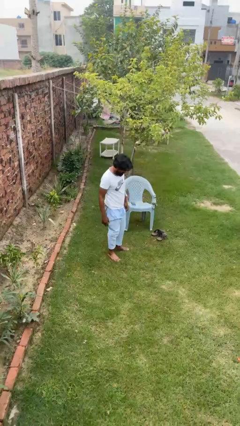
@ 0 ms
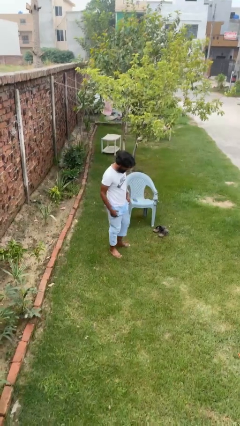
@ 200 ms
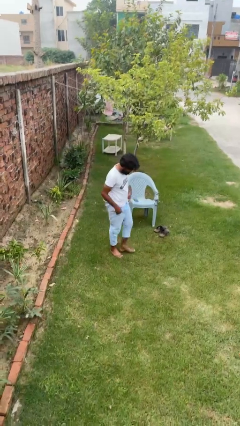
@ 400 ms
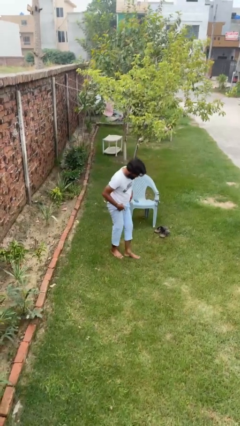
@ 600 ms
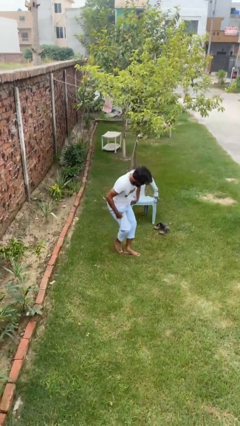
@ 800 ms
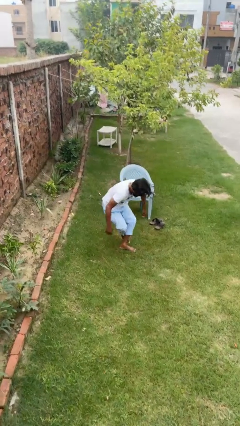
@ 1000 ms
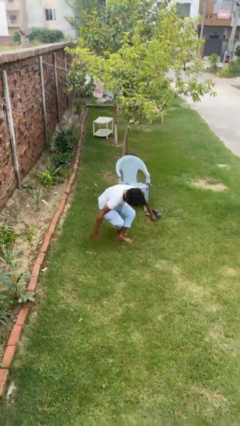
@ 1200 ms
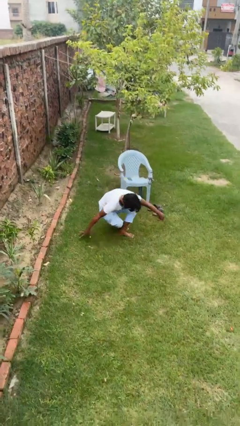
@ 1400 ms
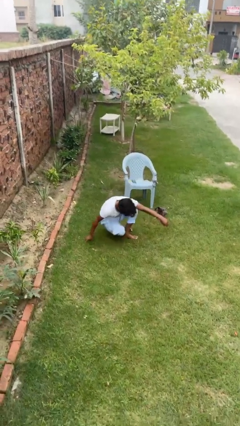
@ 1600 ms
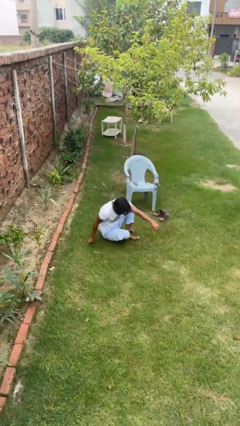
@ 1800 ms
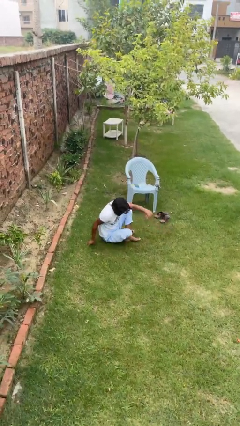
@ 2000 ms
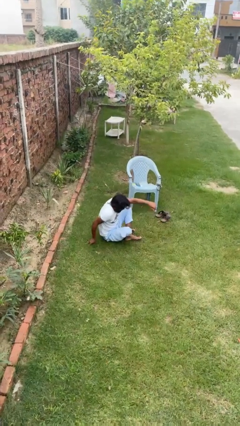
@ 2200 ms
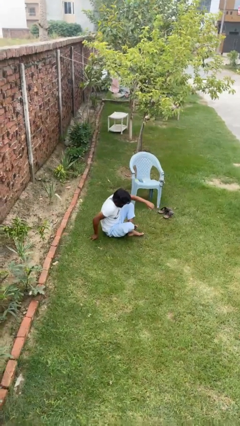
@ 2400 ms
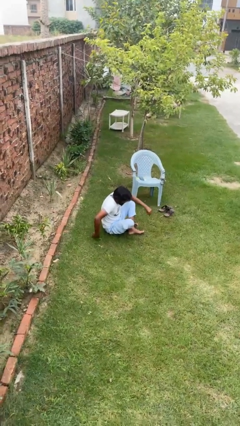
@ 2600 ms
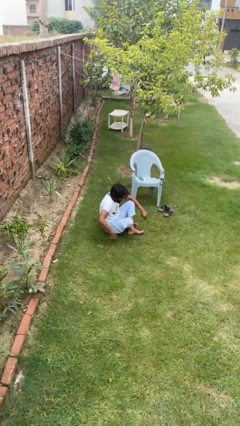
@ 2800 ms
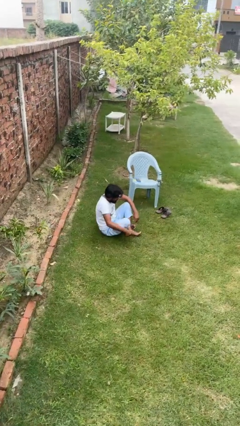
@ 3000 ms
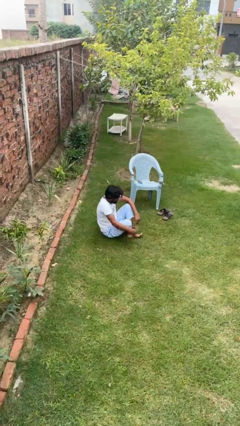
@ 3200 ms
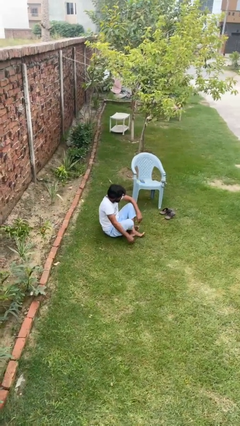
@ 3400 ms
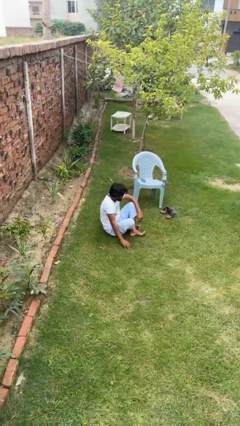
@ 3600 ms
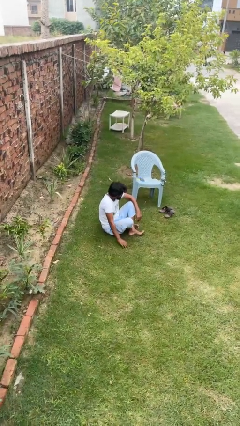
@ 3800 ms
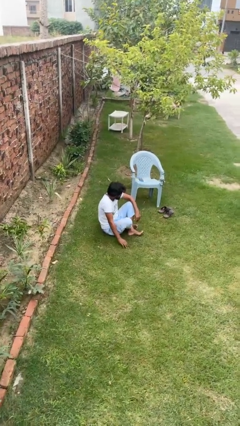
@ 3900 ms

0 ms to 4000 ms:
person sits crisscross

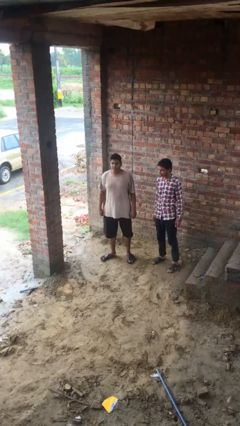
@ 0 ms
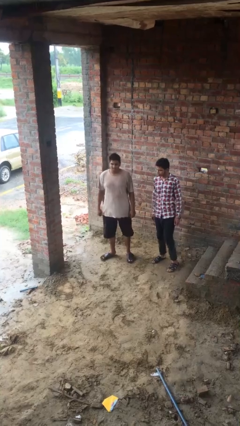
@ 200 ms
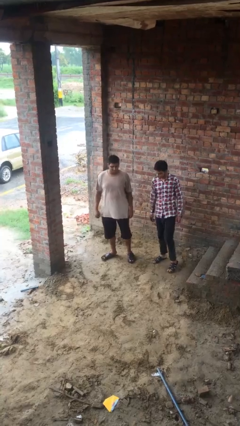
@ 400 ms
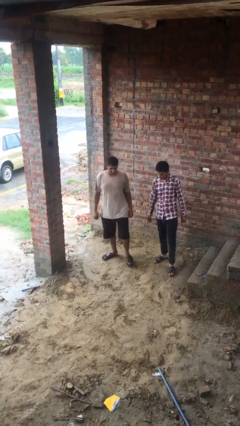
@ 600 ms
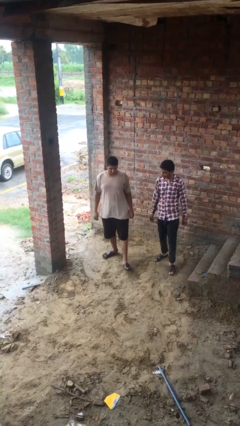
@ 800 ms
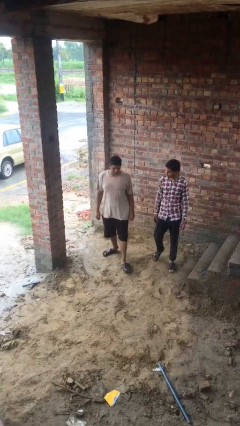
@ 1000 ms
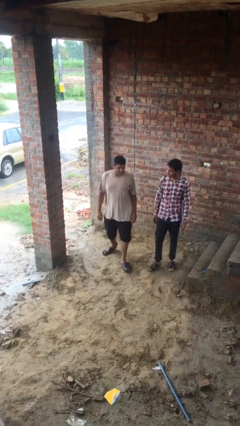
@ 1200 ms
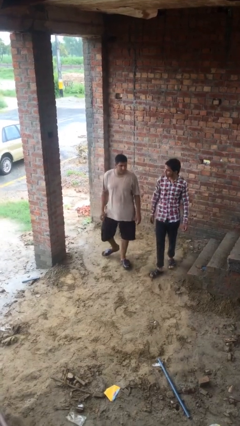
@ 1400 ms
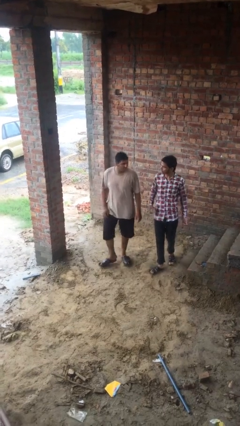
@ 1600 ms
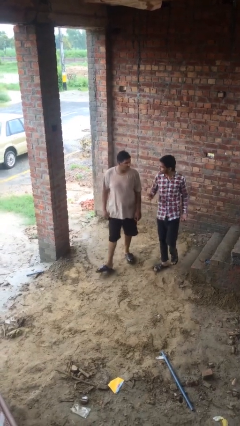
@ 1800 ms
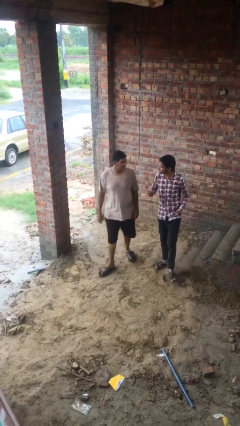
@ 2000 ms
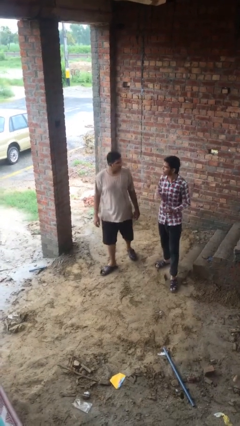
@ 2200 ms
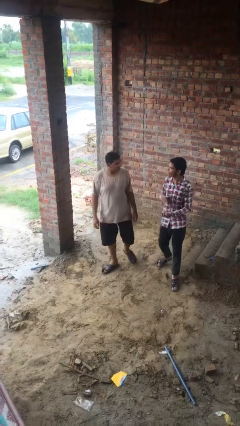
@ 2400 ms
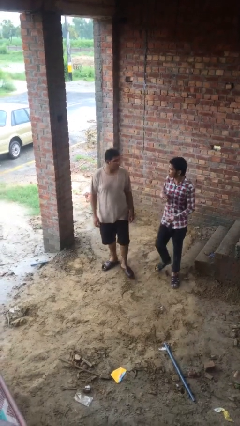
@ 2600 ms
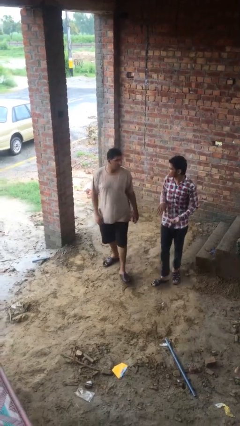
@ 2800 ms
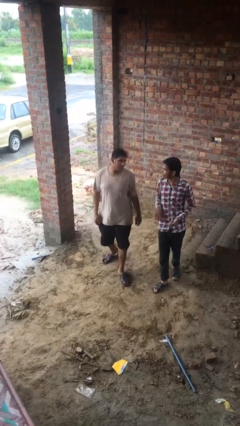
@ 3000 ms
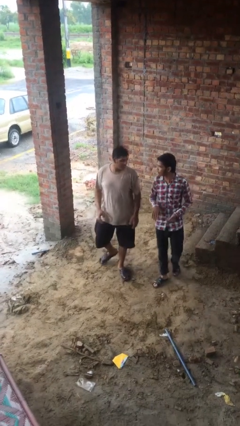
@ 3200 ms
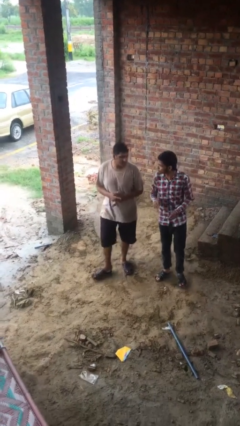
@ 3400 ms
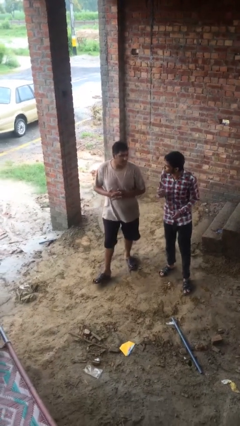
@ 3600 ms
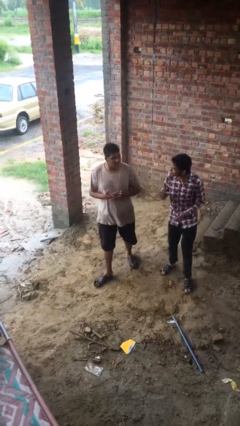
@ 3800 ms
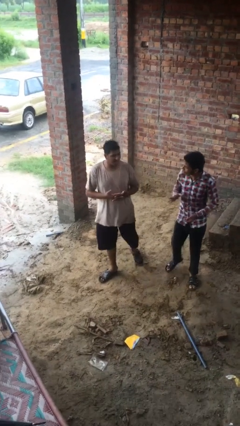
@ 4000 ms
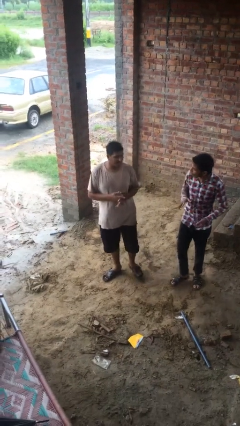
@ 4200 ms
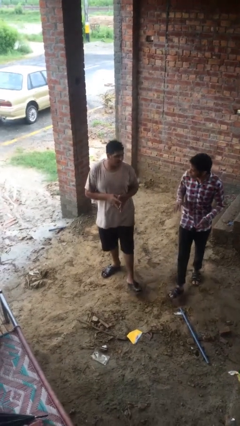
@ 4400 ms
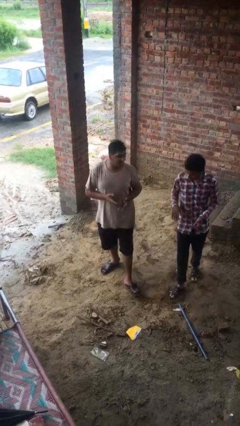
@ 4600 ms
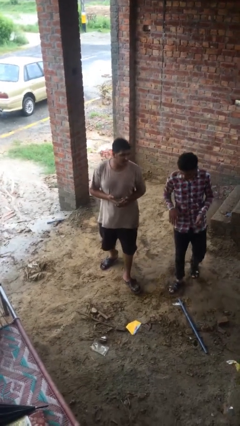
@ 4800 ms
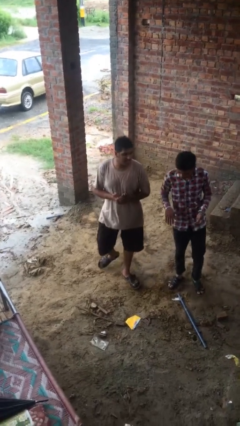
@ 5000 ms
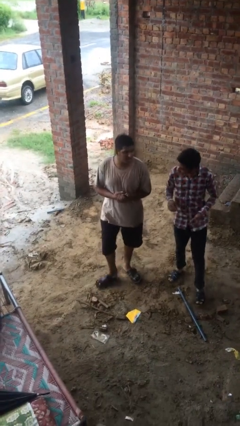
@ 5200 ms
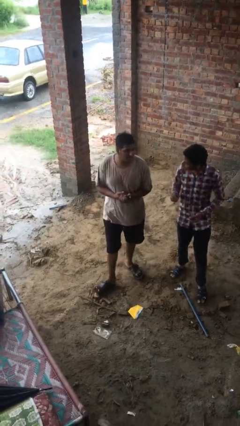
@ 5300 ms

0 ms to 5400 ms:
person talks to person

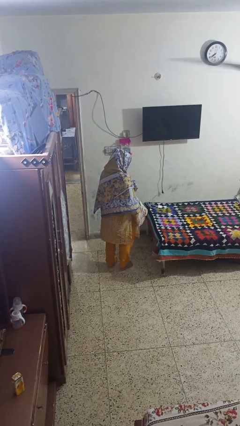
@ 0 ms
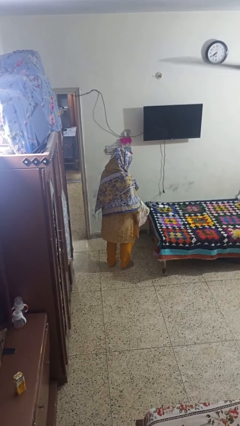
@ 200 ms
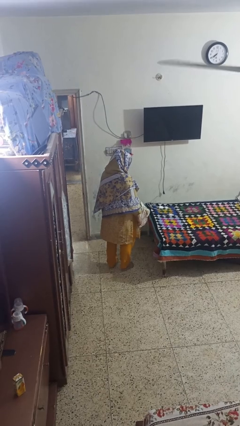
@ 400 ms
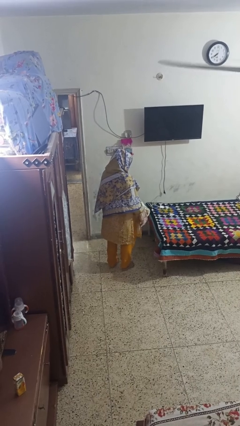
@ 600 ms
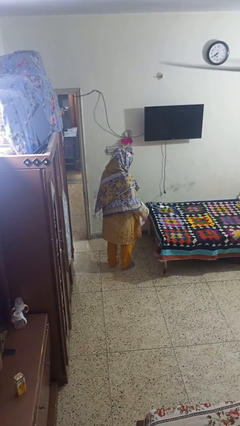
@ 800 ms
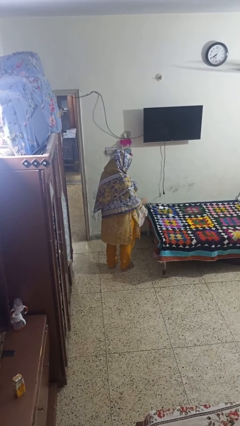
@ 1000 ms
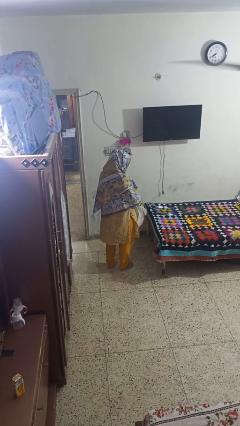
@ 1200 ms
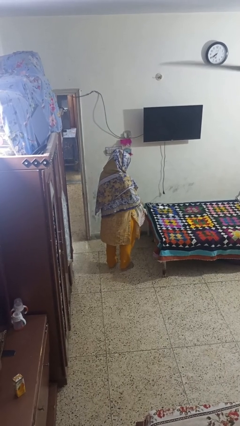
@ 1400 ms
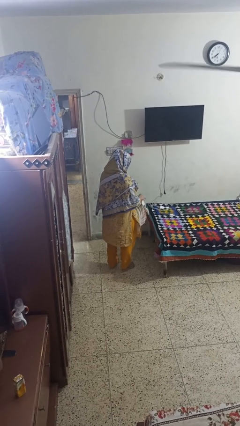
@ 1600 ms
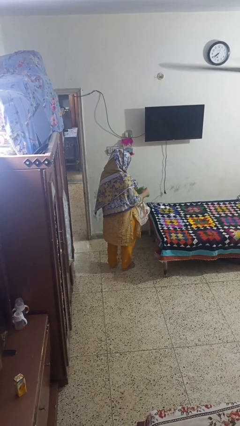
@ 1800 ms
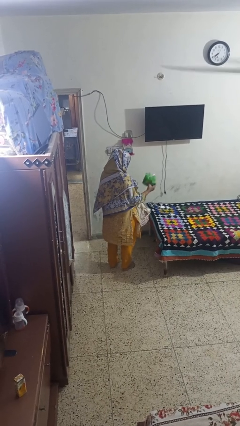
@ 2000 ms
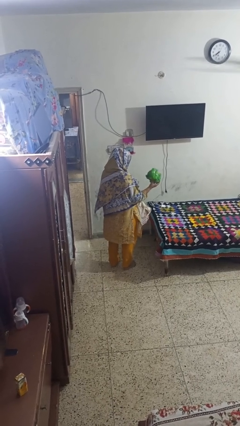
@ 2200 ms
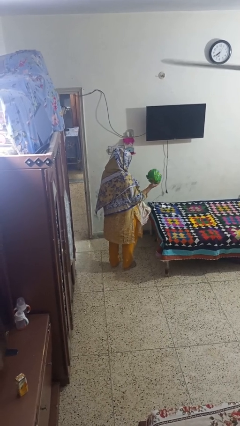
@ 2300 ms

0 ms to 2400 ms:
person takes object from bag

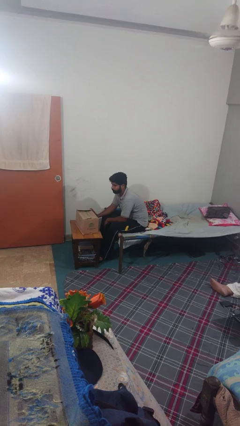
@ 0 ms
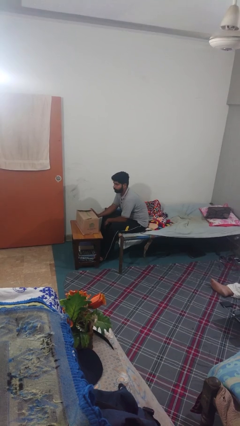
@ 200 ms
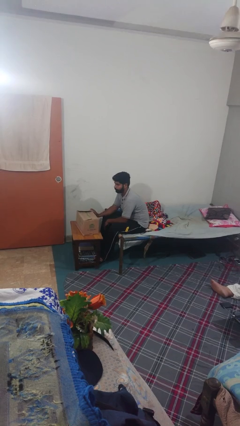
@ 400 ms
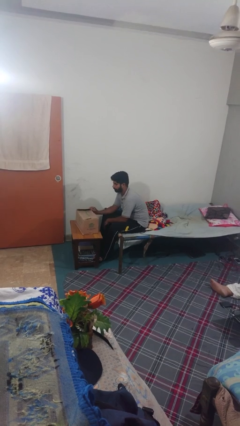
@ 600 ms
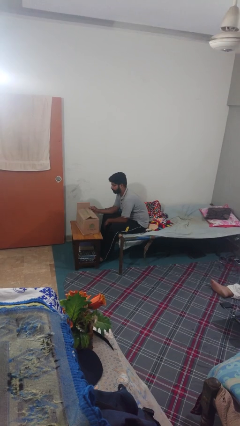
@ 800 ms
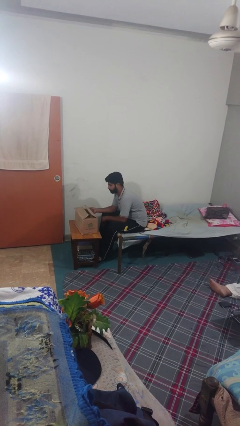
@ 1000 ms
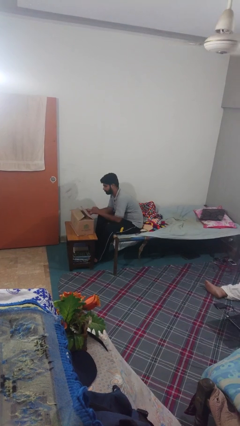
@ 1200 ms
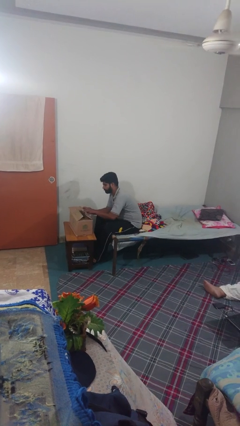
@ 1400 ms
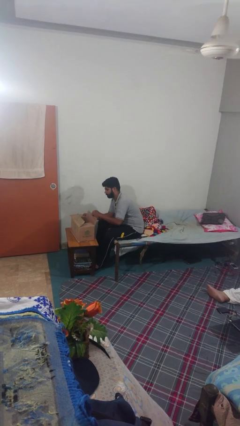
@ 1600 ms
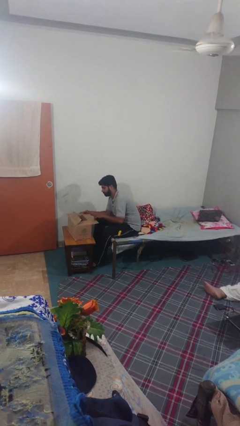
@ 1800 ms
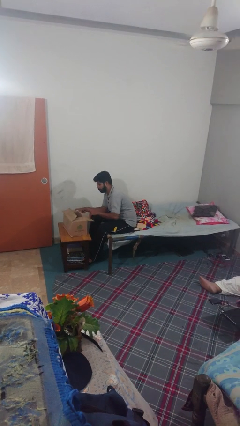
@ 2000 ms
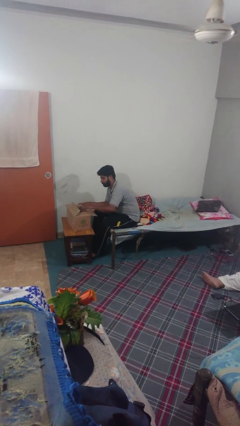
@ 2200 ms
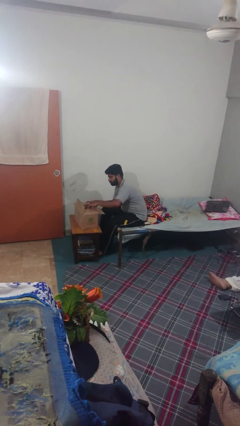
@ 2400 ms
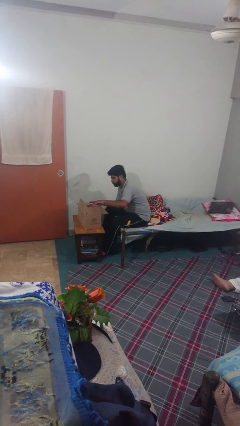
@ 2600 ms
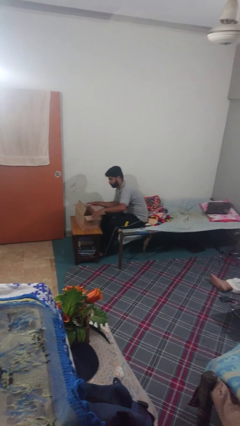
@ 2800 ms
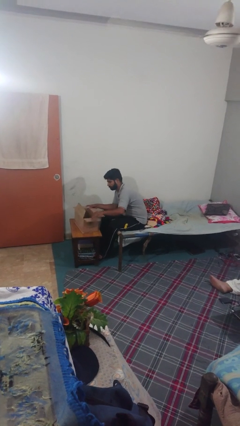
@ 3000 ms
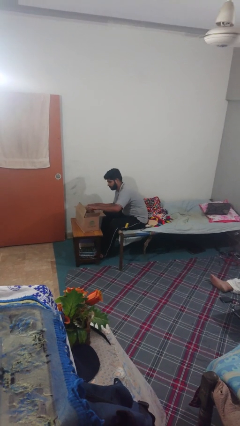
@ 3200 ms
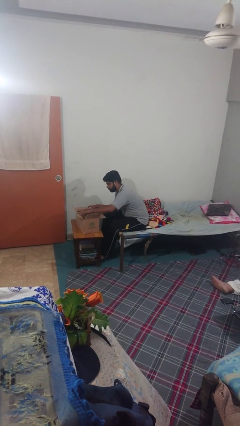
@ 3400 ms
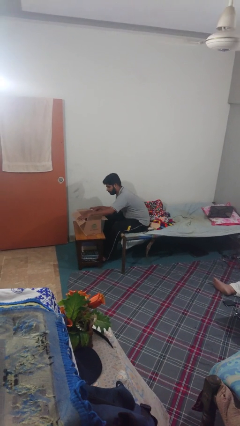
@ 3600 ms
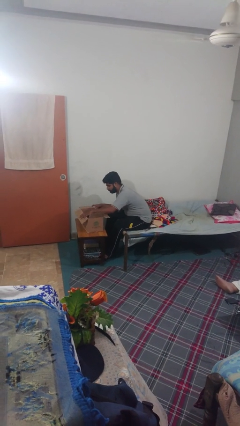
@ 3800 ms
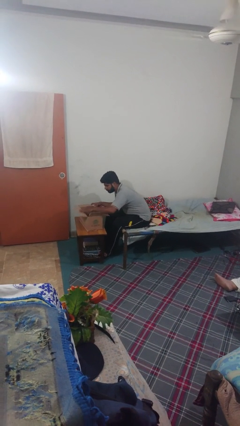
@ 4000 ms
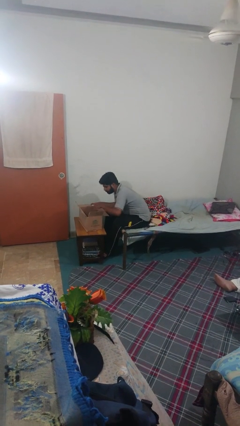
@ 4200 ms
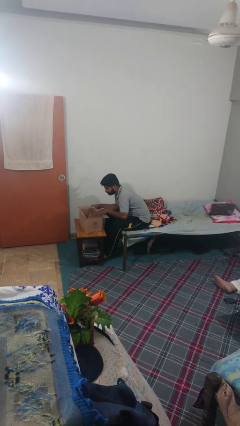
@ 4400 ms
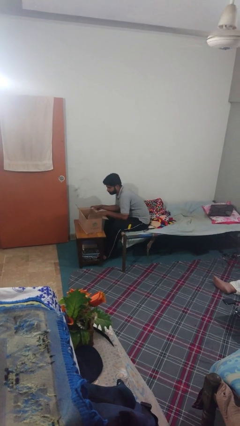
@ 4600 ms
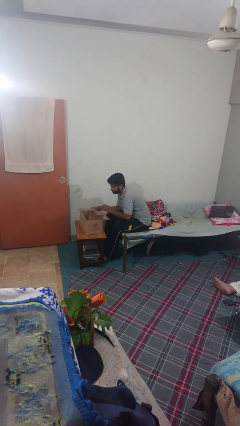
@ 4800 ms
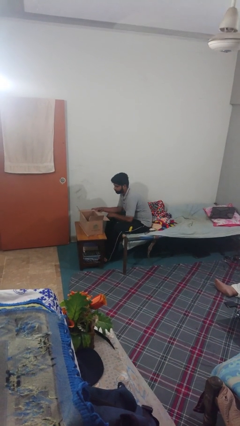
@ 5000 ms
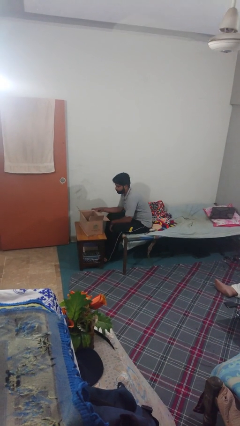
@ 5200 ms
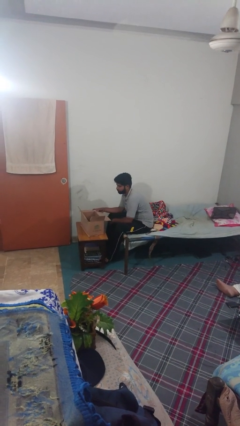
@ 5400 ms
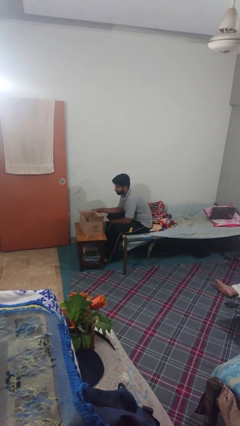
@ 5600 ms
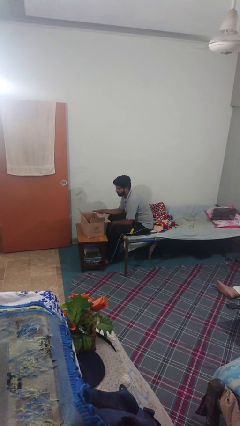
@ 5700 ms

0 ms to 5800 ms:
person opens box
